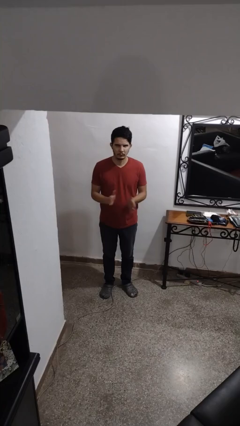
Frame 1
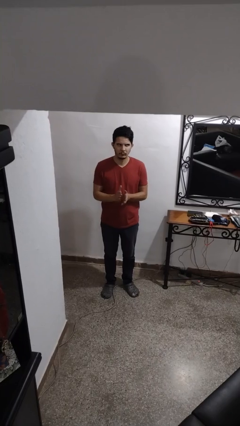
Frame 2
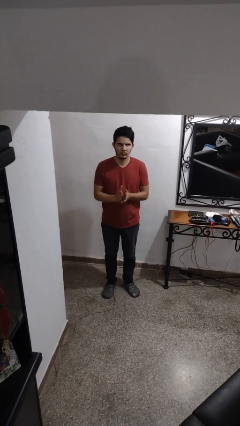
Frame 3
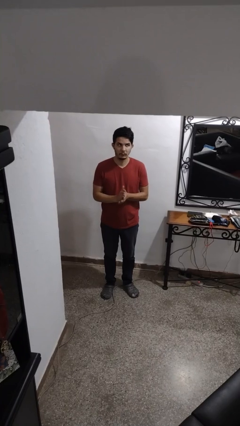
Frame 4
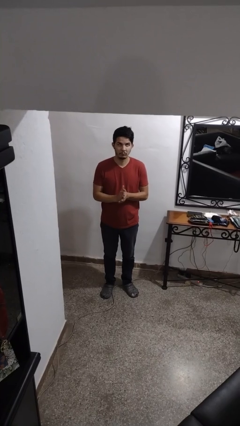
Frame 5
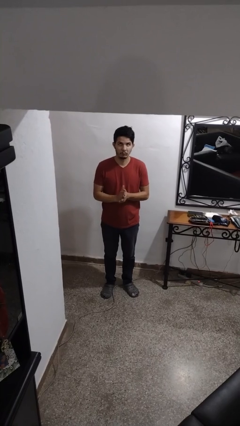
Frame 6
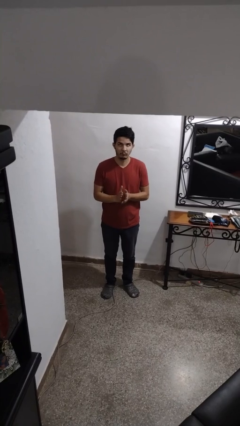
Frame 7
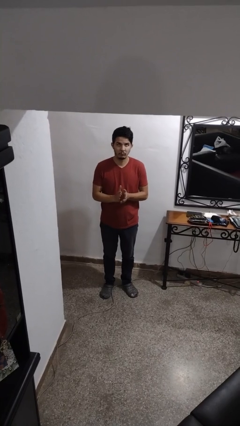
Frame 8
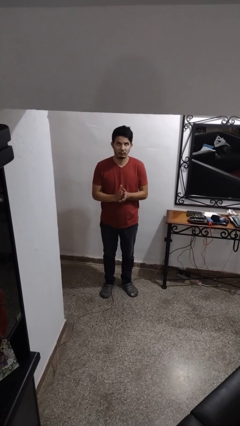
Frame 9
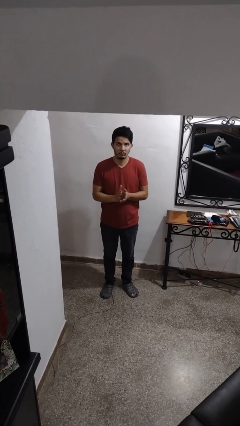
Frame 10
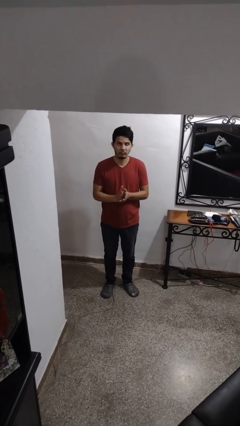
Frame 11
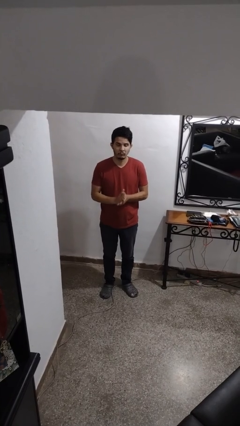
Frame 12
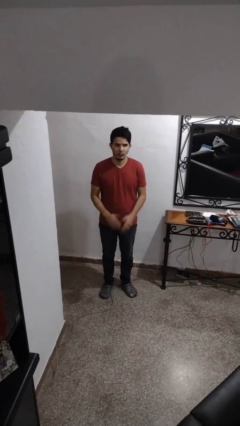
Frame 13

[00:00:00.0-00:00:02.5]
person claps hands

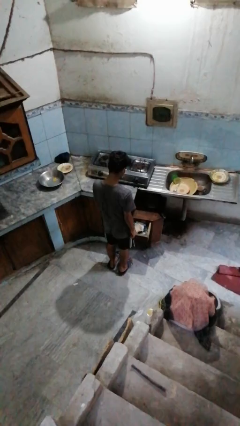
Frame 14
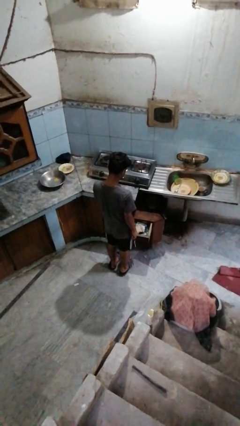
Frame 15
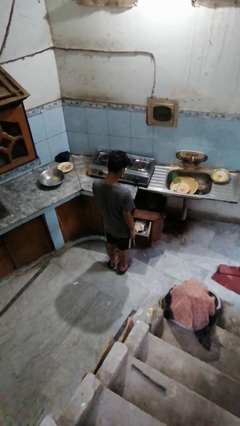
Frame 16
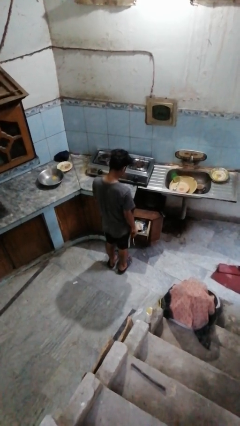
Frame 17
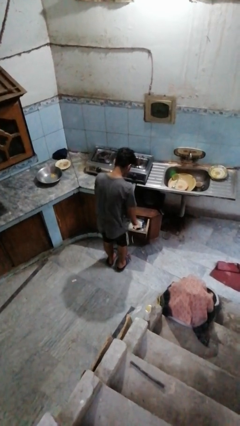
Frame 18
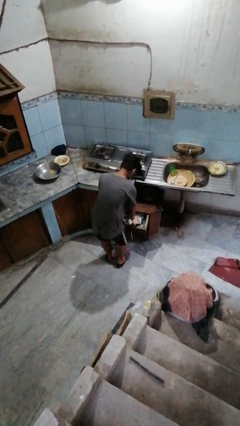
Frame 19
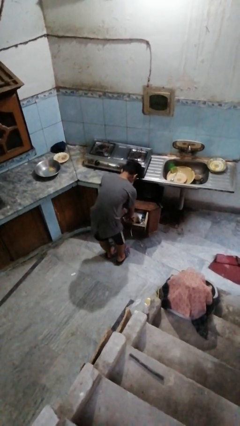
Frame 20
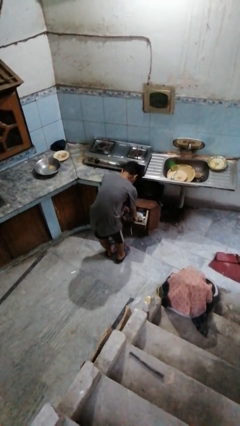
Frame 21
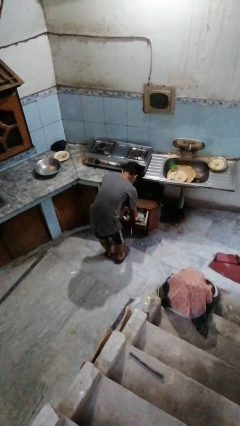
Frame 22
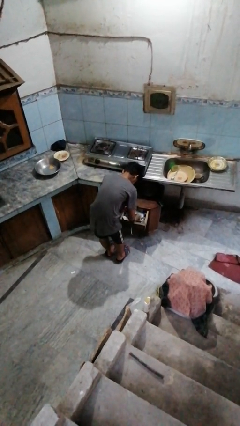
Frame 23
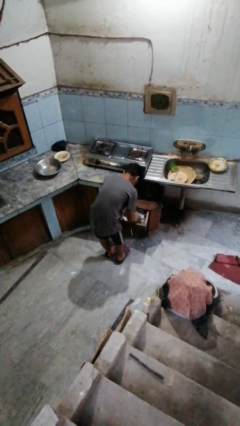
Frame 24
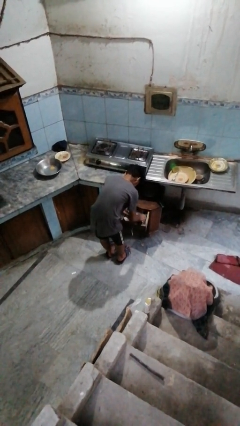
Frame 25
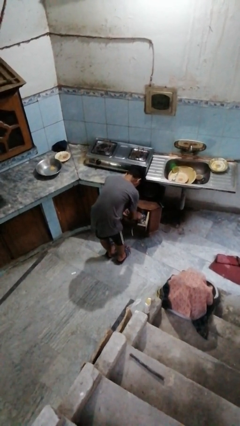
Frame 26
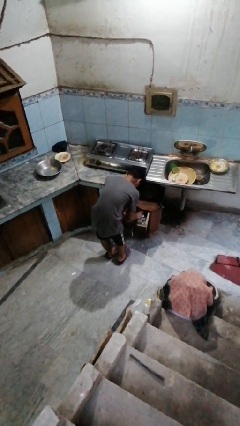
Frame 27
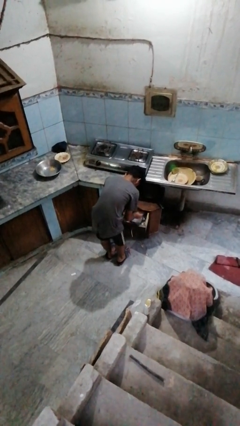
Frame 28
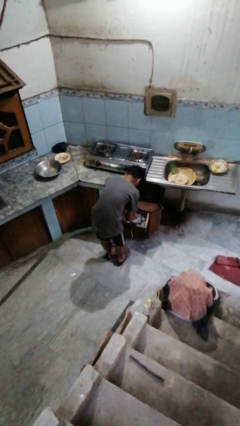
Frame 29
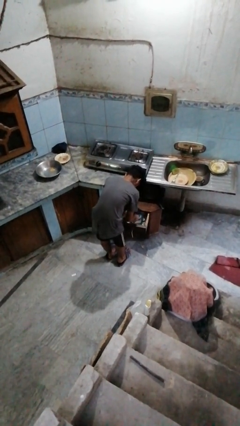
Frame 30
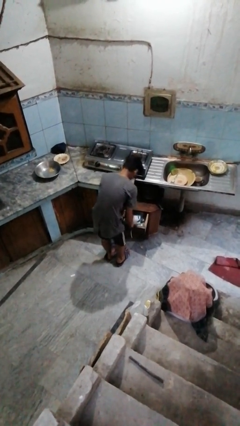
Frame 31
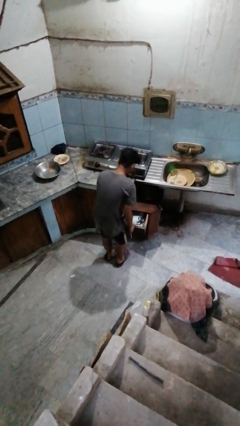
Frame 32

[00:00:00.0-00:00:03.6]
person searches in kitchen drawer

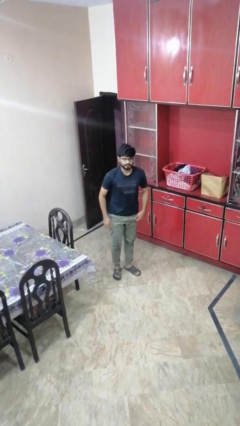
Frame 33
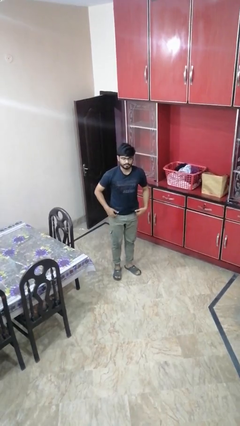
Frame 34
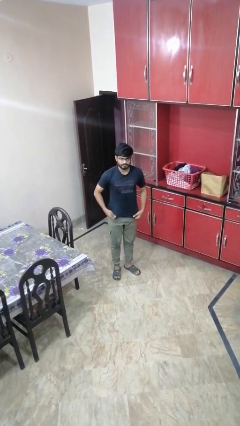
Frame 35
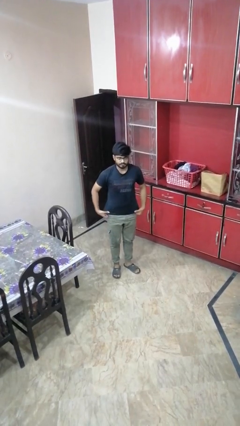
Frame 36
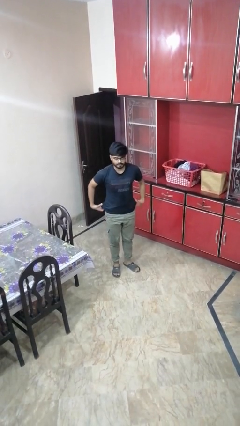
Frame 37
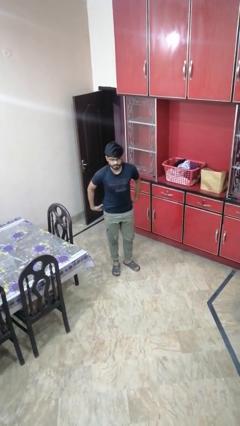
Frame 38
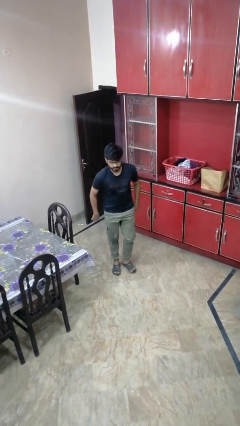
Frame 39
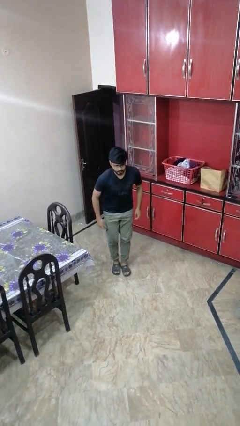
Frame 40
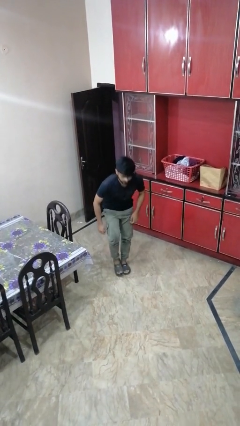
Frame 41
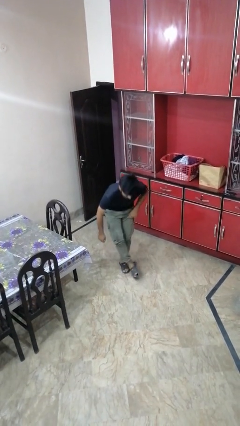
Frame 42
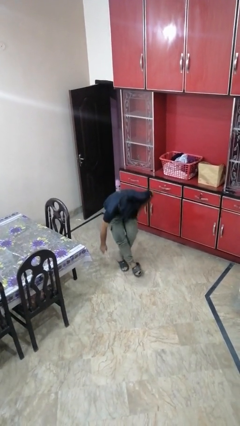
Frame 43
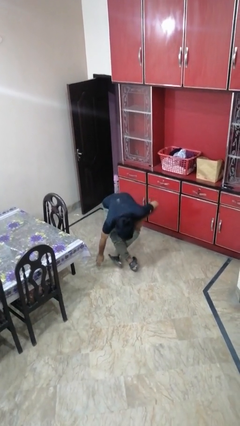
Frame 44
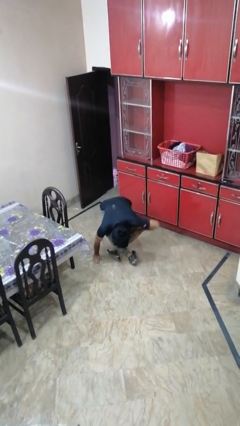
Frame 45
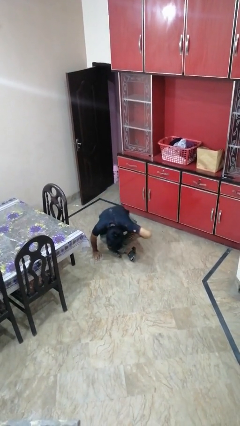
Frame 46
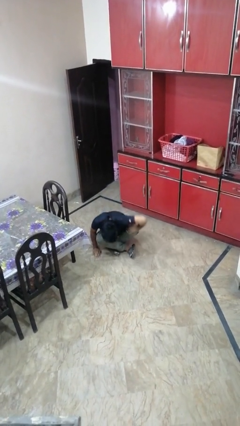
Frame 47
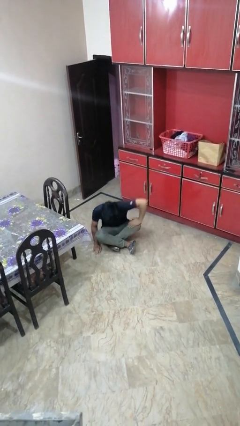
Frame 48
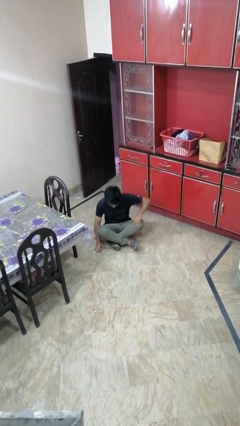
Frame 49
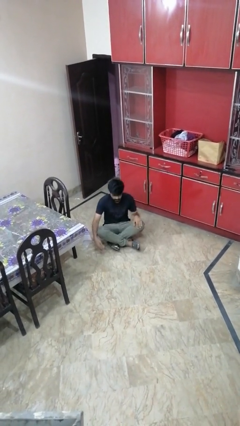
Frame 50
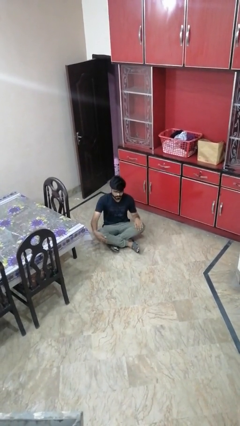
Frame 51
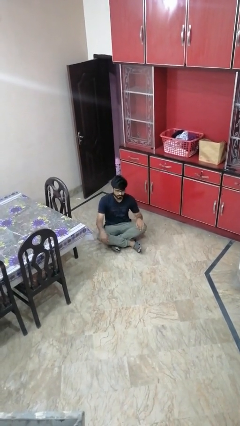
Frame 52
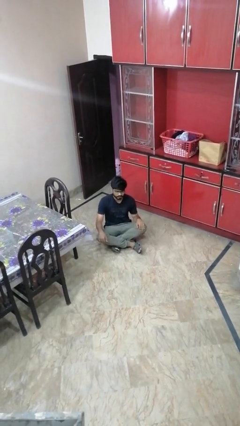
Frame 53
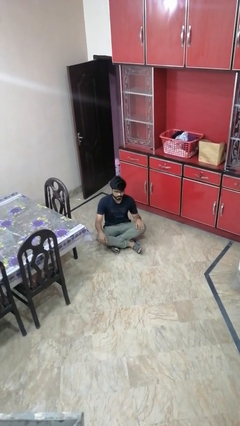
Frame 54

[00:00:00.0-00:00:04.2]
person sits crisscross

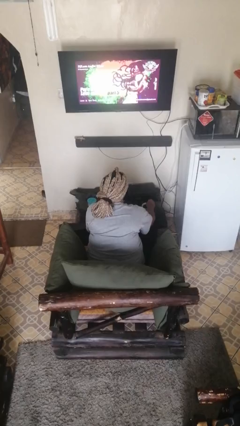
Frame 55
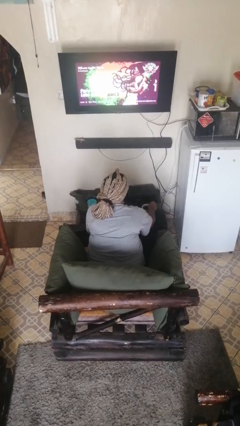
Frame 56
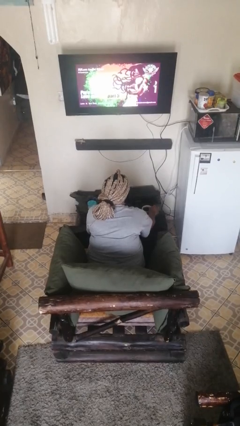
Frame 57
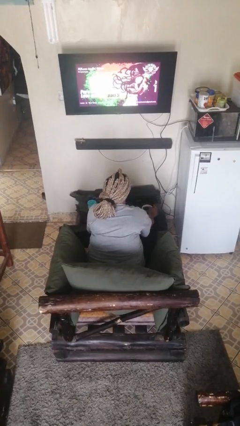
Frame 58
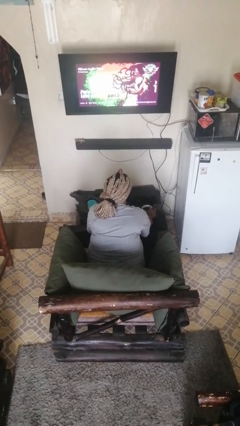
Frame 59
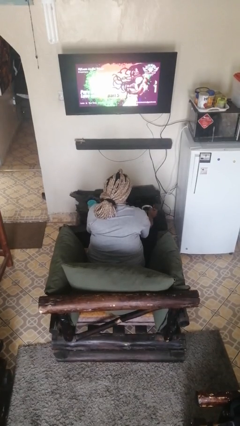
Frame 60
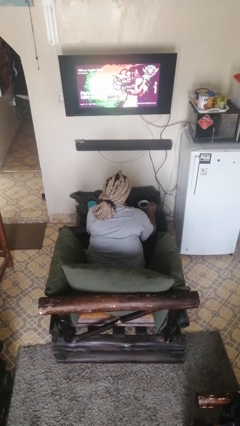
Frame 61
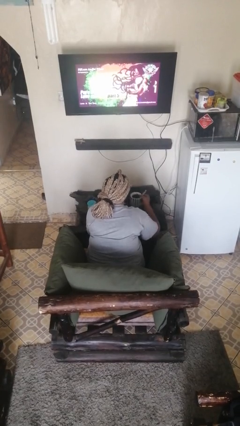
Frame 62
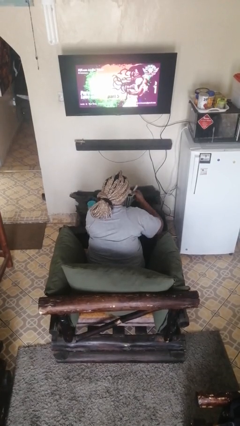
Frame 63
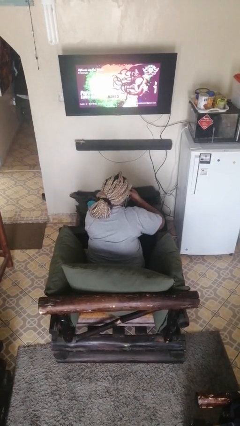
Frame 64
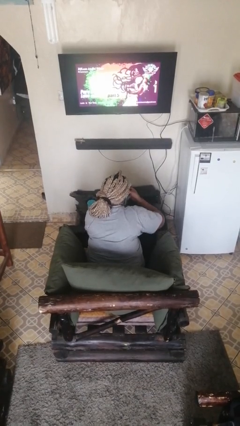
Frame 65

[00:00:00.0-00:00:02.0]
person drinks from mug

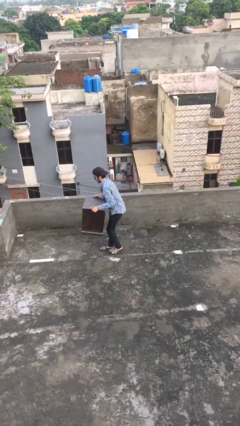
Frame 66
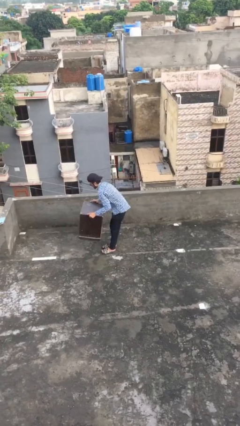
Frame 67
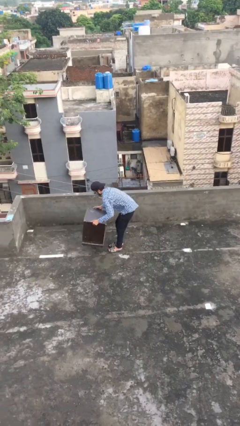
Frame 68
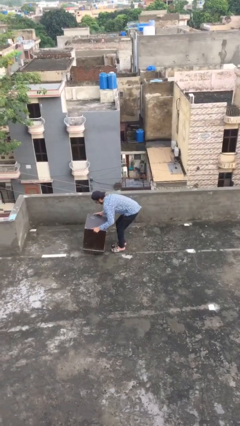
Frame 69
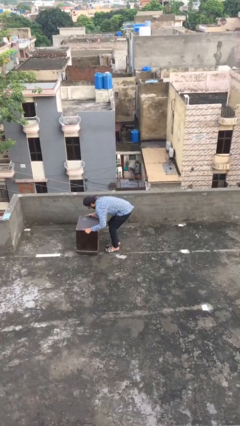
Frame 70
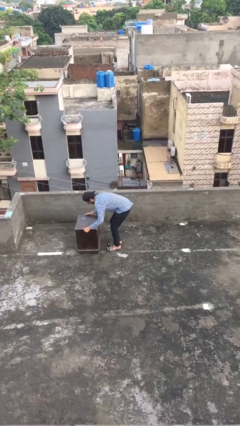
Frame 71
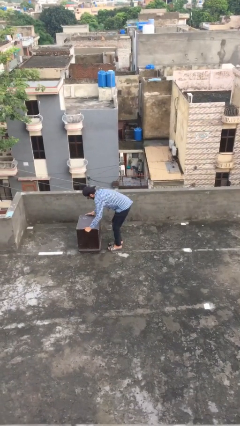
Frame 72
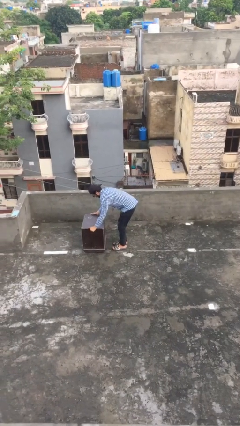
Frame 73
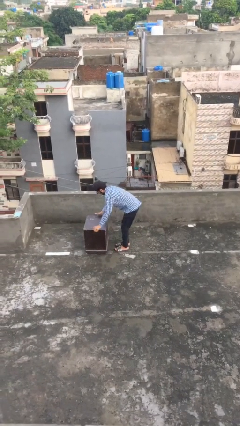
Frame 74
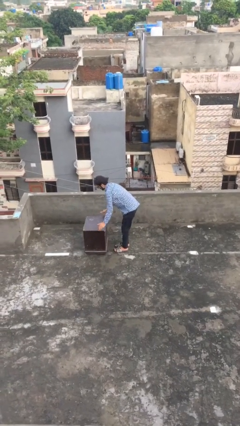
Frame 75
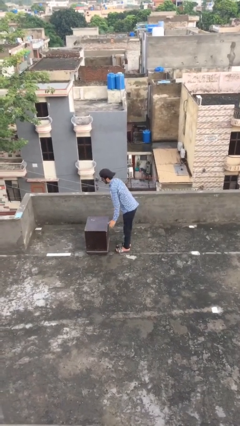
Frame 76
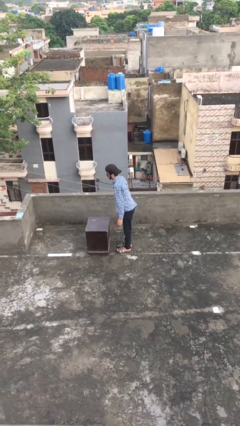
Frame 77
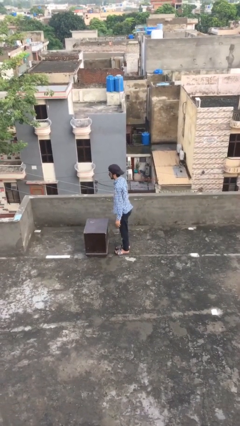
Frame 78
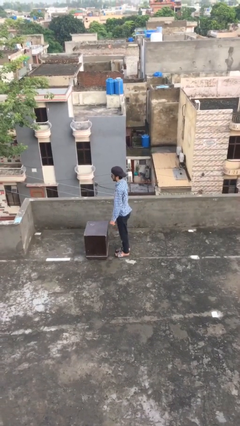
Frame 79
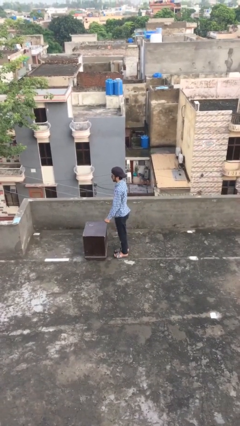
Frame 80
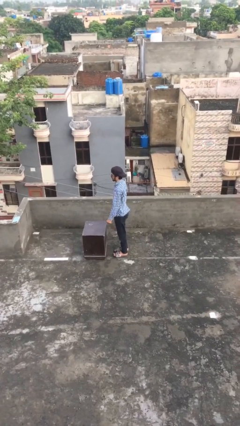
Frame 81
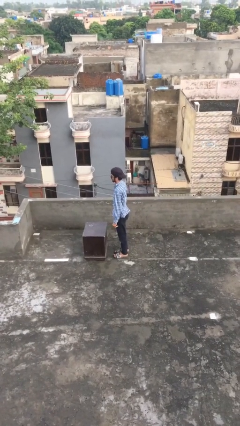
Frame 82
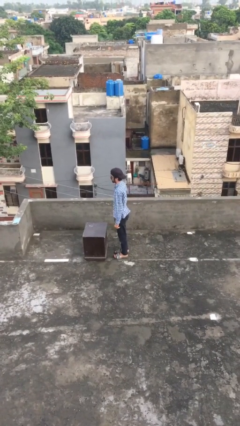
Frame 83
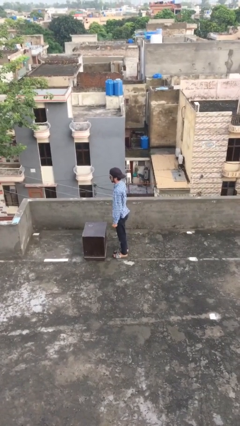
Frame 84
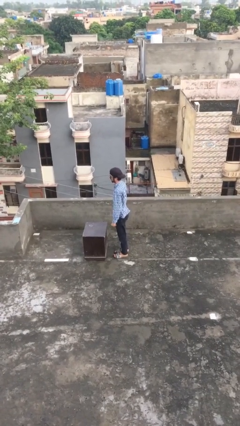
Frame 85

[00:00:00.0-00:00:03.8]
person puts down object on floor

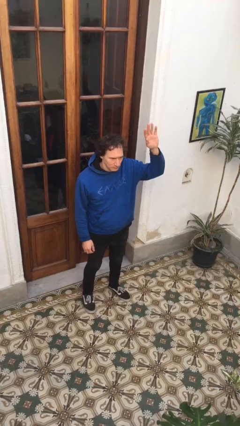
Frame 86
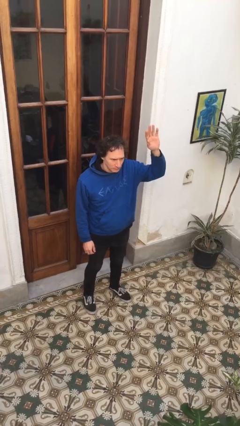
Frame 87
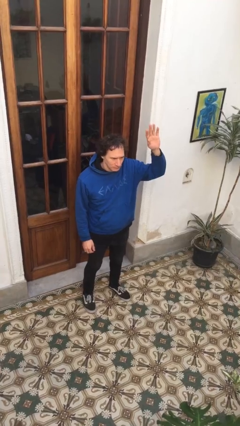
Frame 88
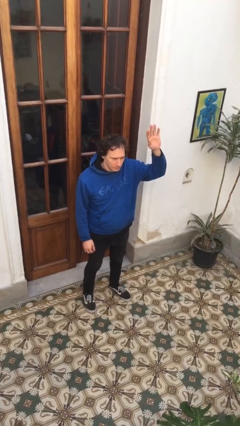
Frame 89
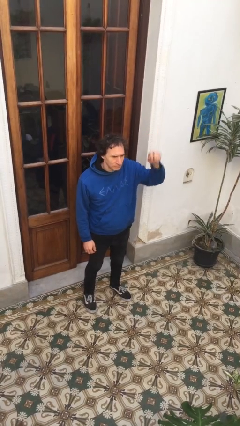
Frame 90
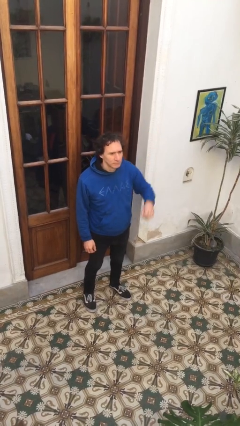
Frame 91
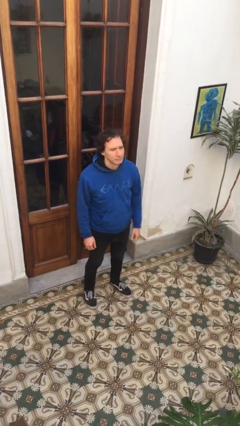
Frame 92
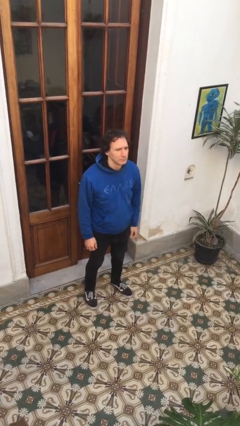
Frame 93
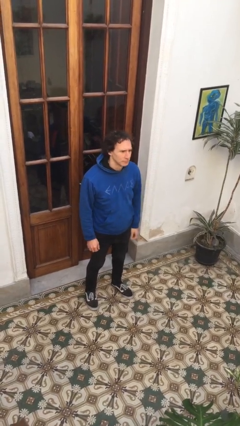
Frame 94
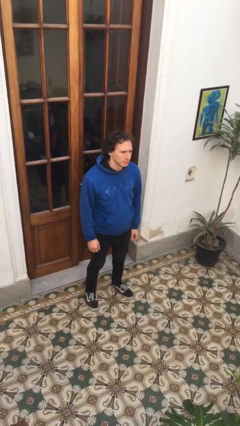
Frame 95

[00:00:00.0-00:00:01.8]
person gestures lower hand
